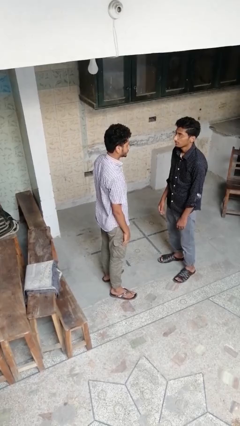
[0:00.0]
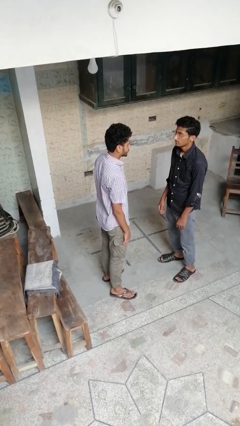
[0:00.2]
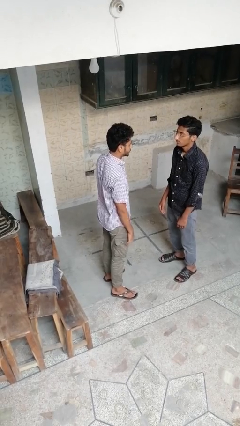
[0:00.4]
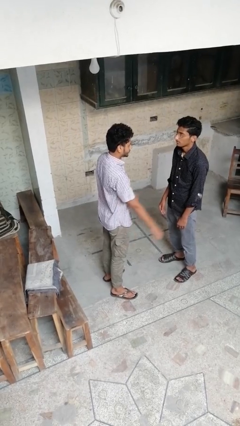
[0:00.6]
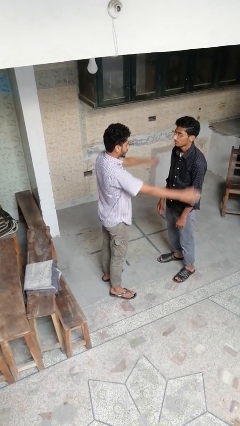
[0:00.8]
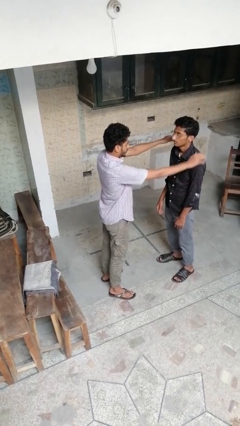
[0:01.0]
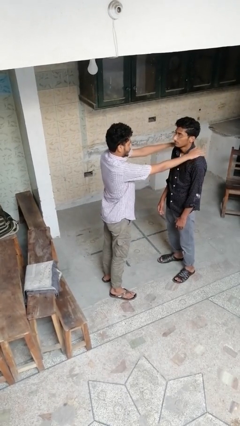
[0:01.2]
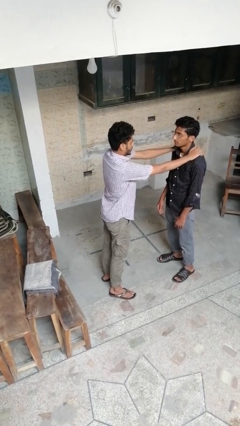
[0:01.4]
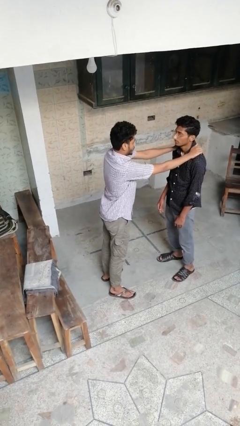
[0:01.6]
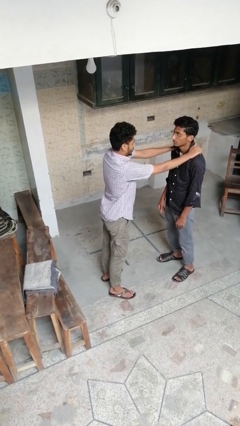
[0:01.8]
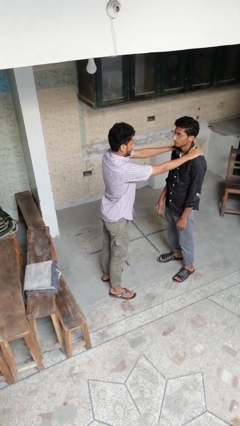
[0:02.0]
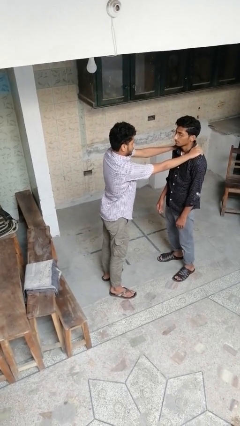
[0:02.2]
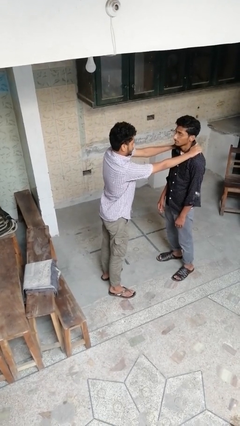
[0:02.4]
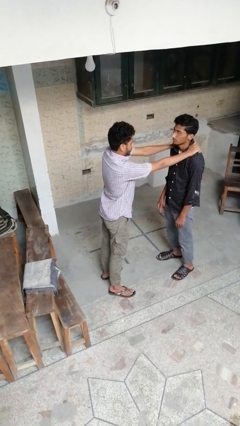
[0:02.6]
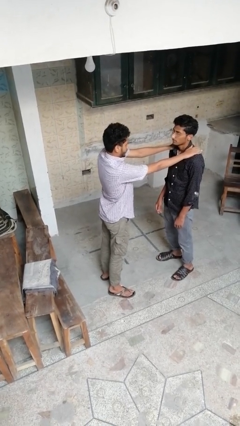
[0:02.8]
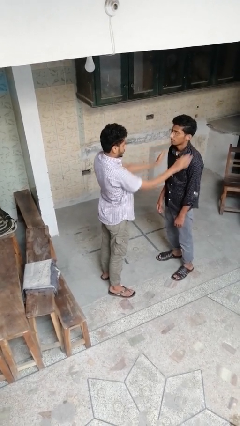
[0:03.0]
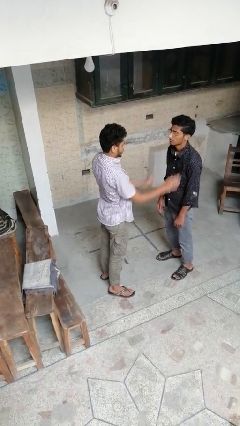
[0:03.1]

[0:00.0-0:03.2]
person pounds shoulders of person

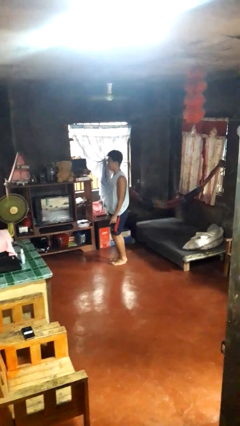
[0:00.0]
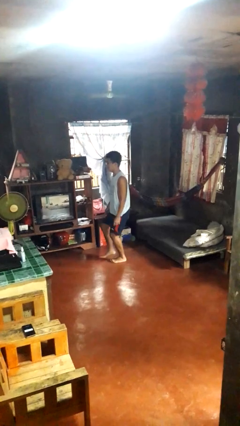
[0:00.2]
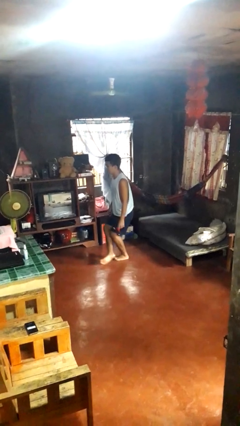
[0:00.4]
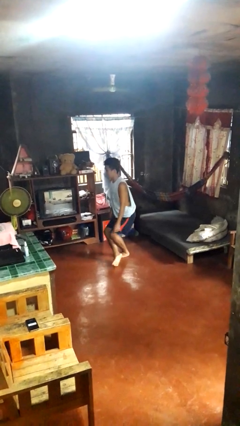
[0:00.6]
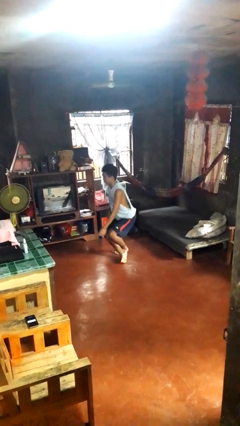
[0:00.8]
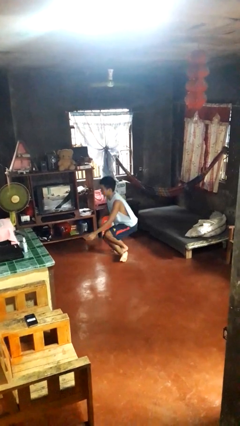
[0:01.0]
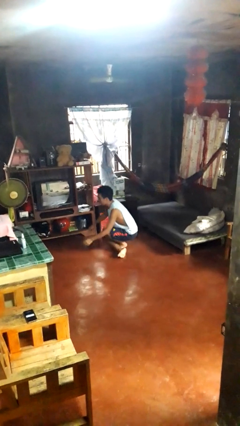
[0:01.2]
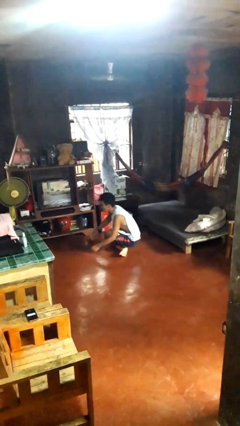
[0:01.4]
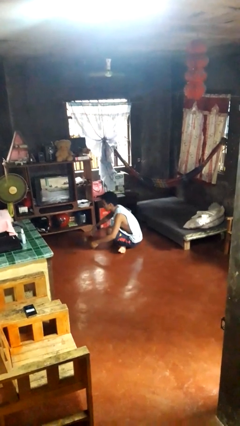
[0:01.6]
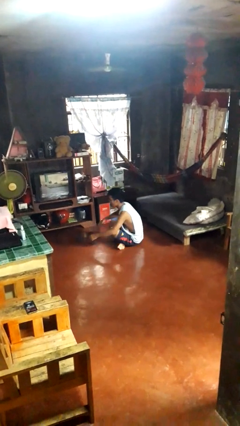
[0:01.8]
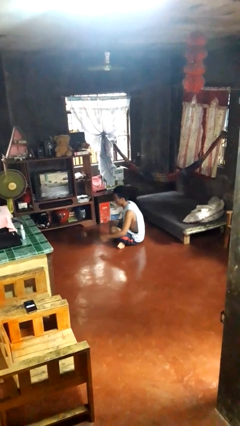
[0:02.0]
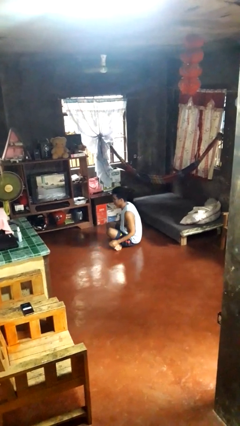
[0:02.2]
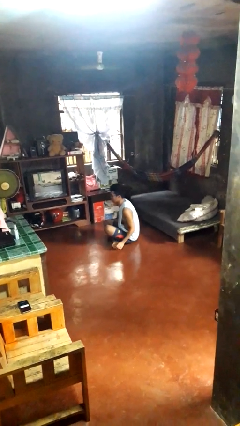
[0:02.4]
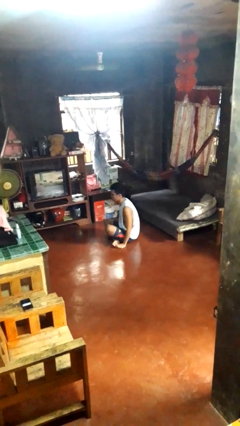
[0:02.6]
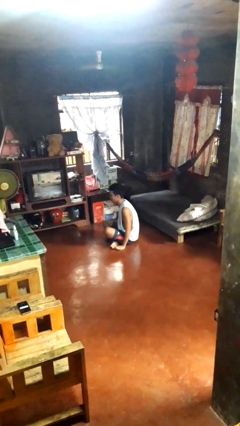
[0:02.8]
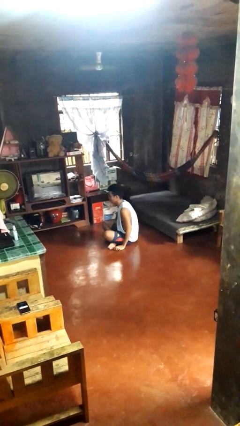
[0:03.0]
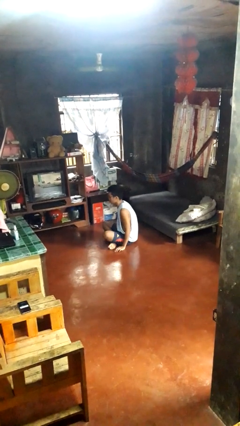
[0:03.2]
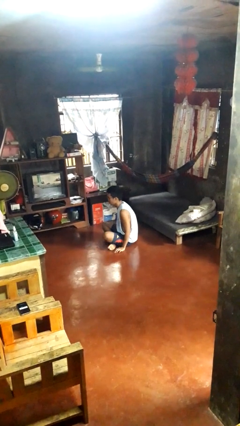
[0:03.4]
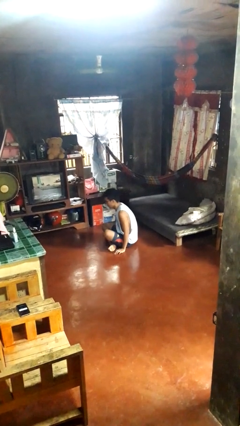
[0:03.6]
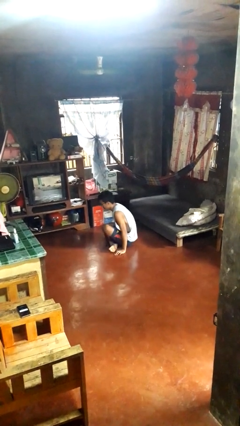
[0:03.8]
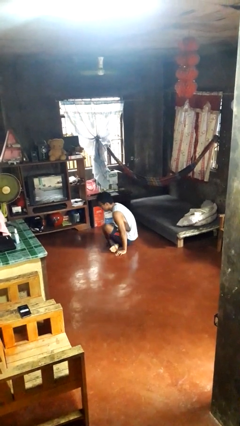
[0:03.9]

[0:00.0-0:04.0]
person sits crisscross

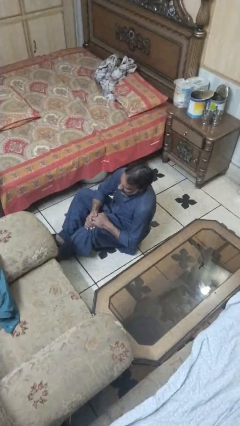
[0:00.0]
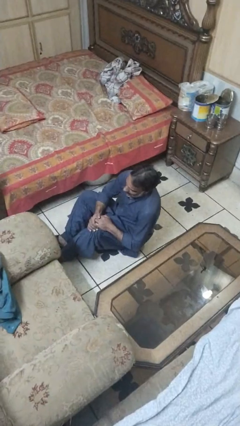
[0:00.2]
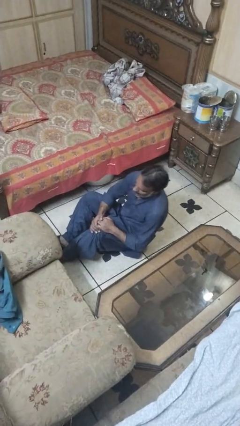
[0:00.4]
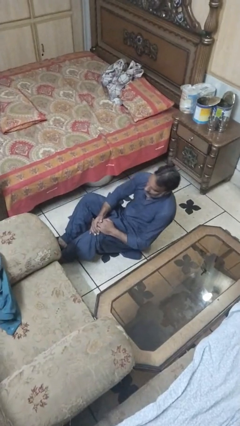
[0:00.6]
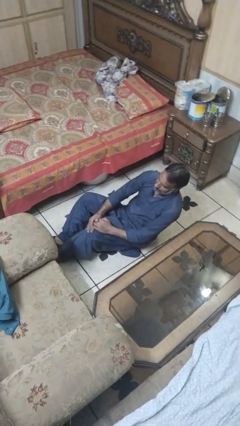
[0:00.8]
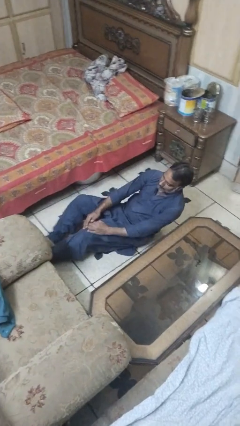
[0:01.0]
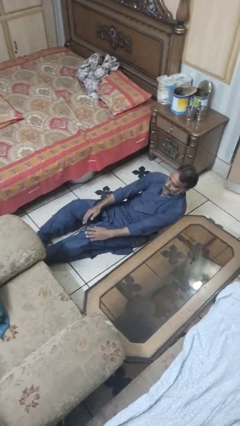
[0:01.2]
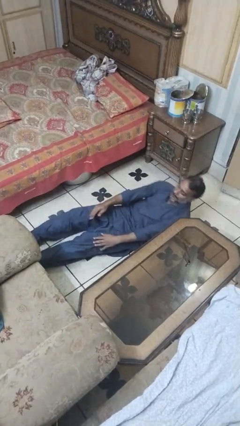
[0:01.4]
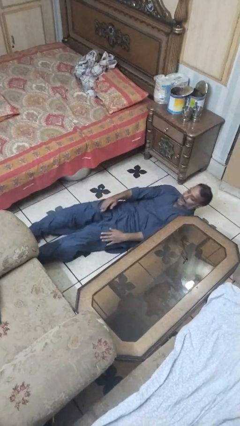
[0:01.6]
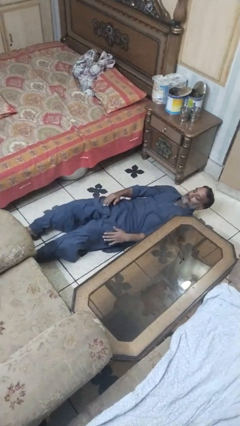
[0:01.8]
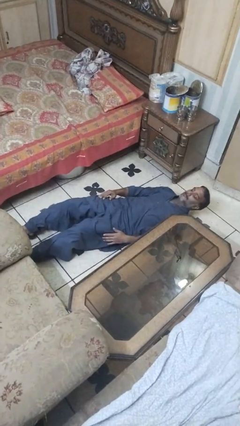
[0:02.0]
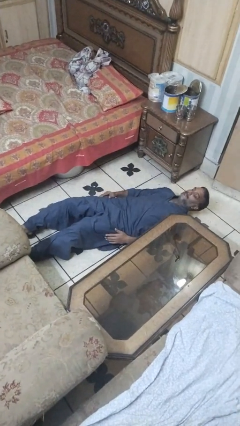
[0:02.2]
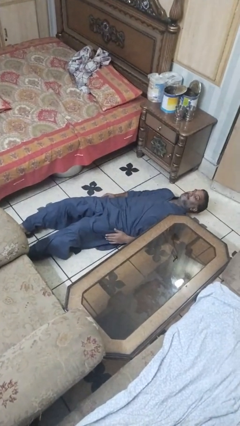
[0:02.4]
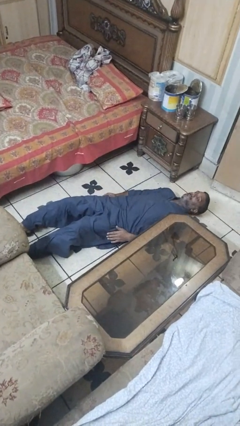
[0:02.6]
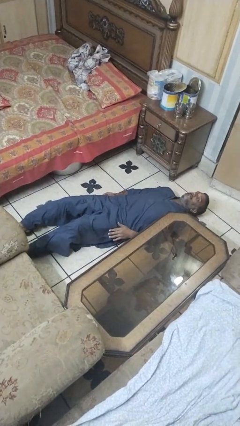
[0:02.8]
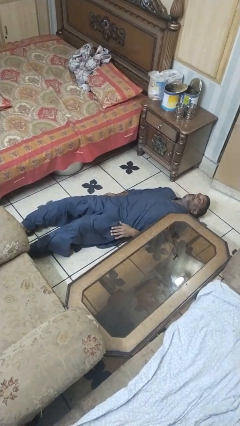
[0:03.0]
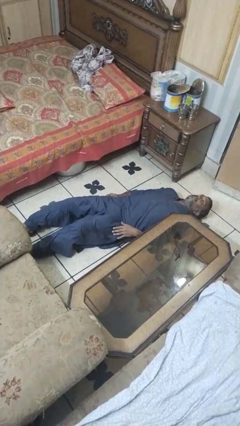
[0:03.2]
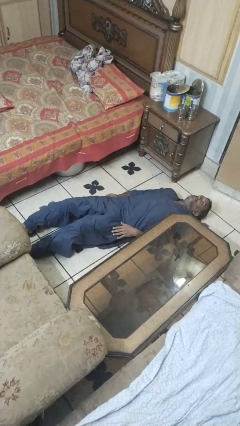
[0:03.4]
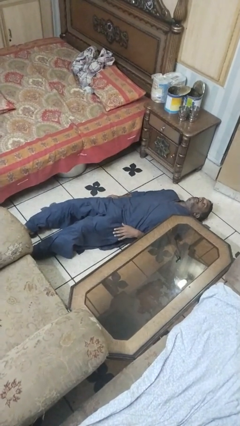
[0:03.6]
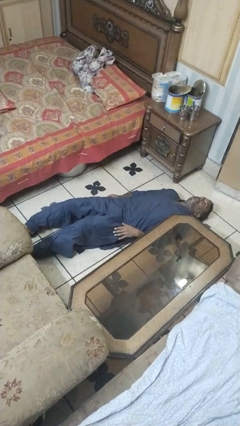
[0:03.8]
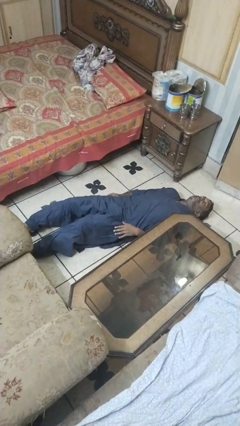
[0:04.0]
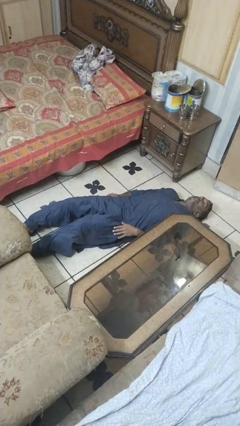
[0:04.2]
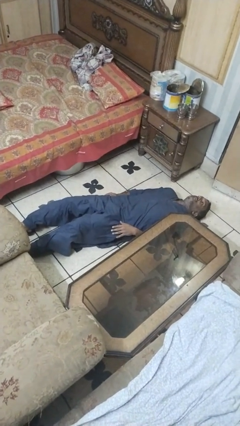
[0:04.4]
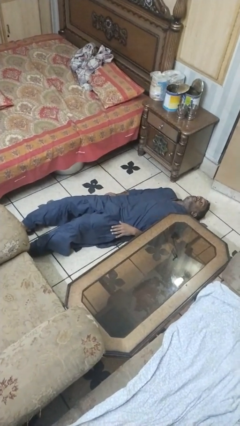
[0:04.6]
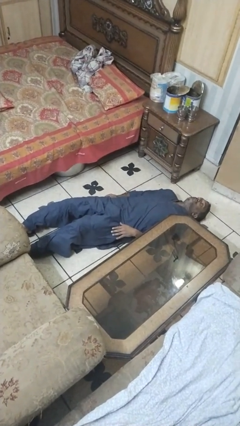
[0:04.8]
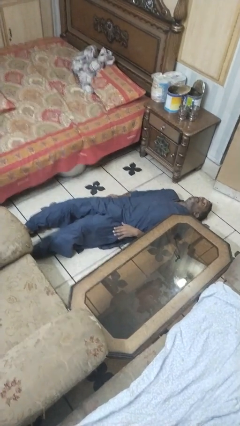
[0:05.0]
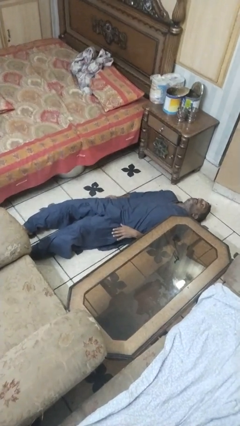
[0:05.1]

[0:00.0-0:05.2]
person lies down on floor

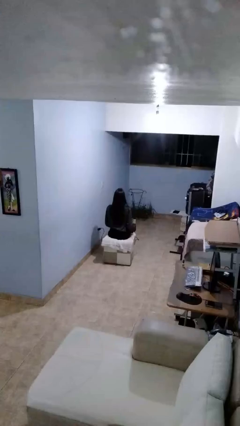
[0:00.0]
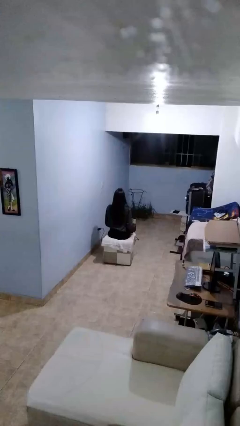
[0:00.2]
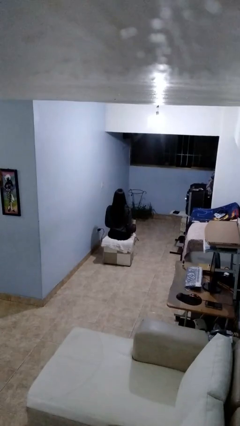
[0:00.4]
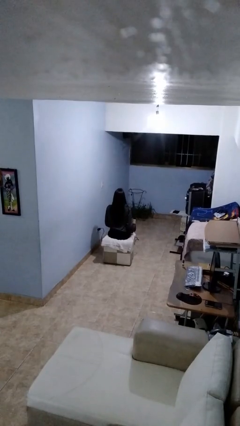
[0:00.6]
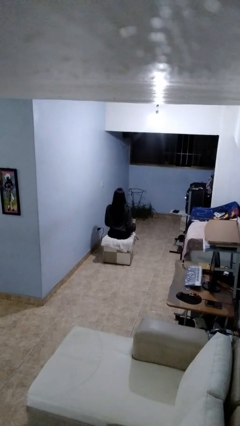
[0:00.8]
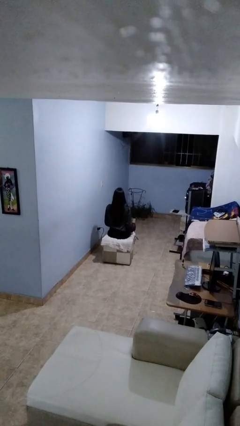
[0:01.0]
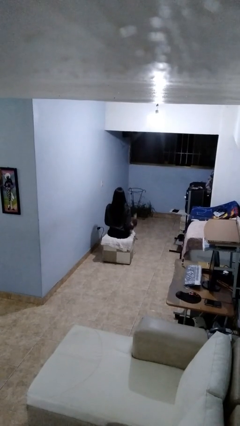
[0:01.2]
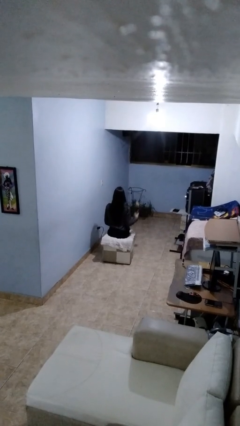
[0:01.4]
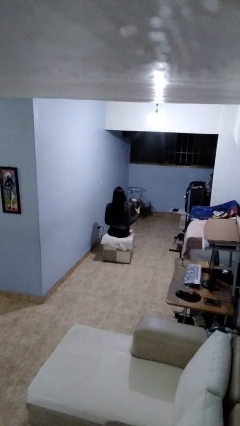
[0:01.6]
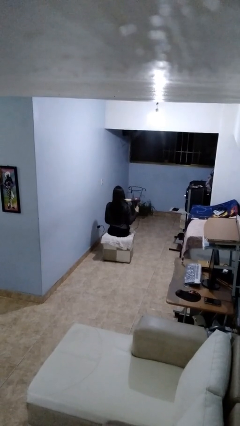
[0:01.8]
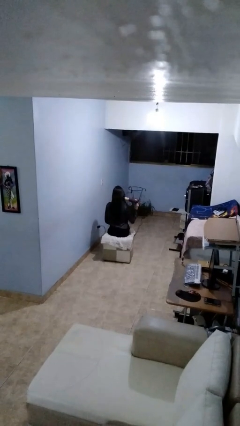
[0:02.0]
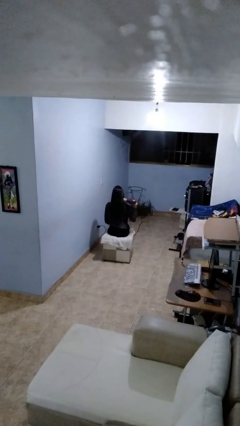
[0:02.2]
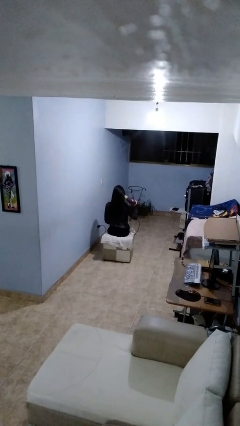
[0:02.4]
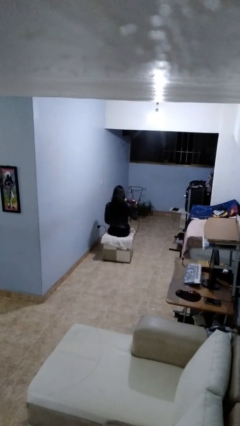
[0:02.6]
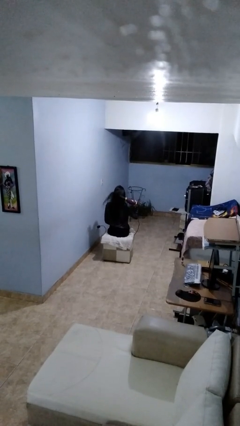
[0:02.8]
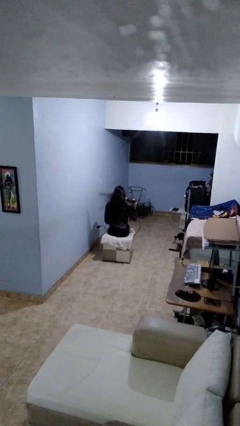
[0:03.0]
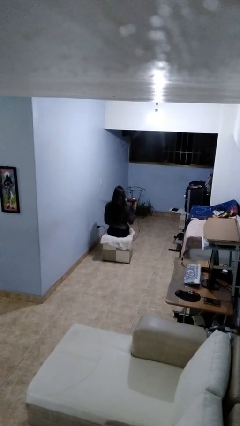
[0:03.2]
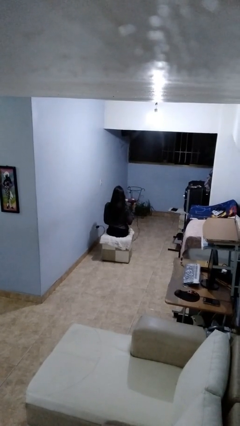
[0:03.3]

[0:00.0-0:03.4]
person dries hair with hairdryer

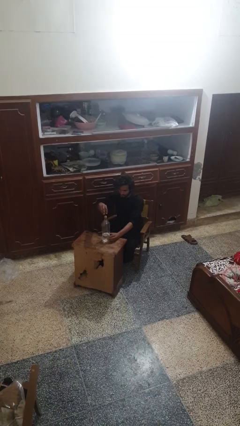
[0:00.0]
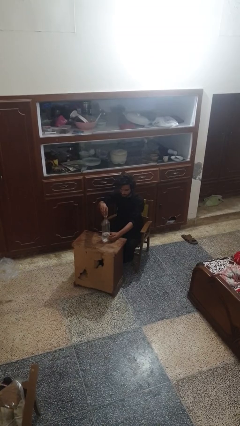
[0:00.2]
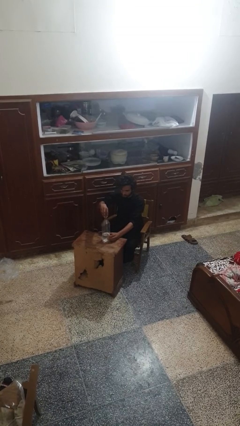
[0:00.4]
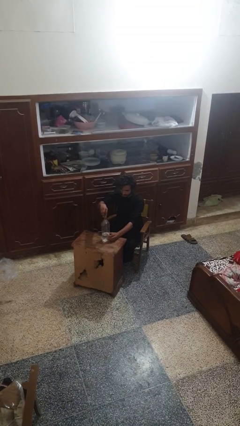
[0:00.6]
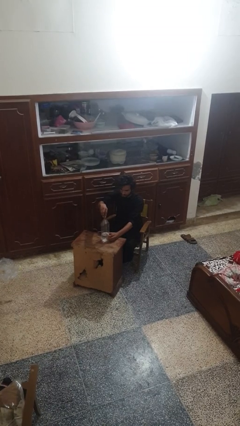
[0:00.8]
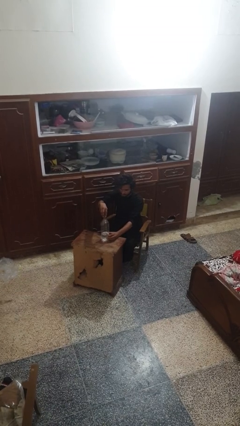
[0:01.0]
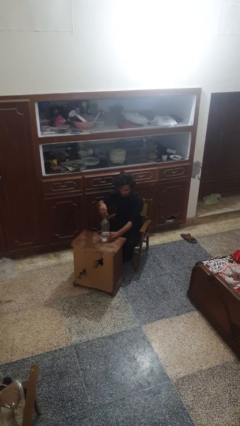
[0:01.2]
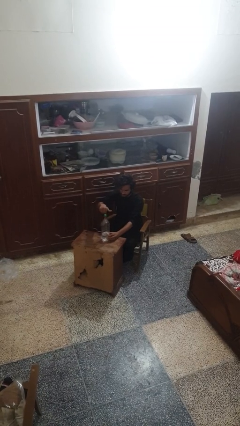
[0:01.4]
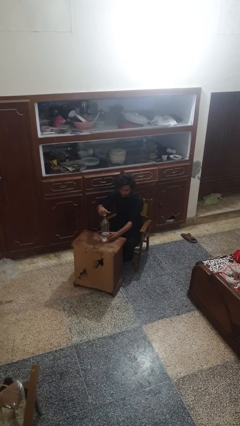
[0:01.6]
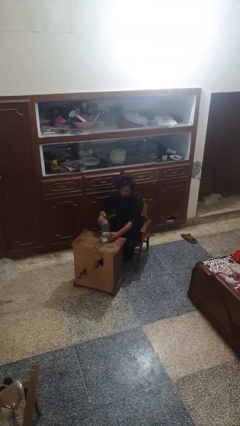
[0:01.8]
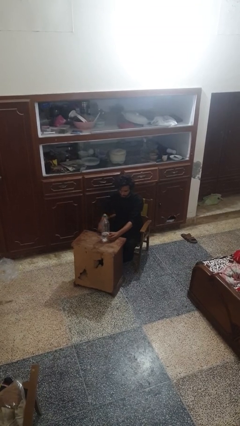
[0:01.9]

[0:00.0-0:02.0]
person screws lid to bottle
